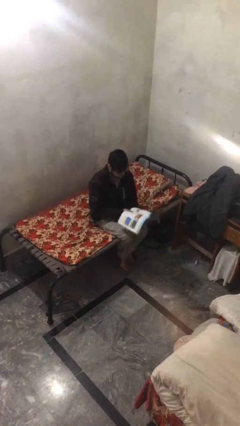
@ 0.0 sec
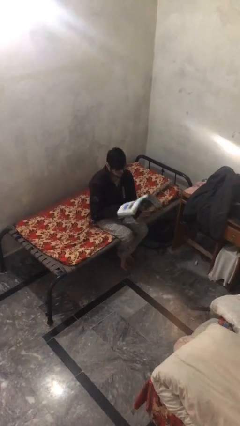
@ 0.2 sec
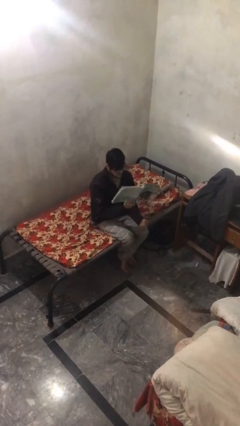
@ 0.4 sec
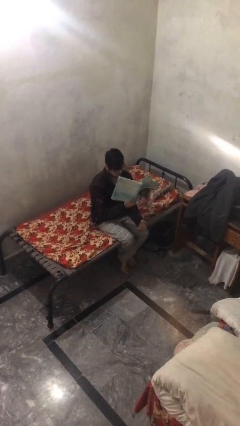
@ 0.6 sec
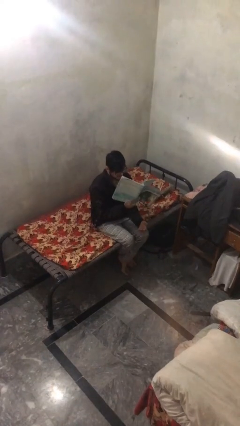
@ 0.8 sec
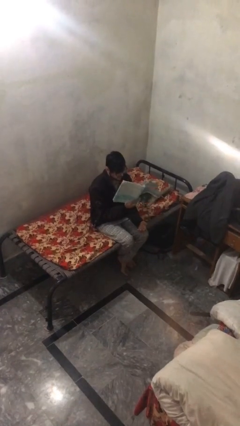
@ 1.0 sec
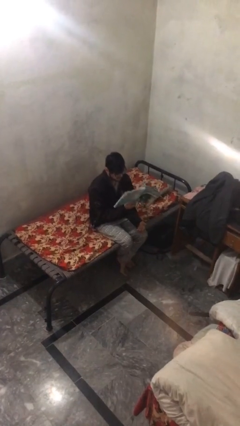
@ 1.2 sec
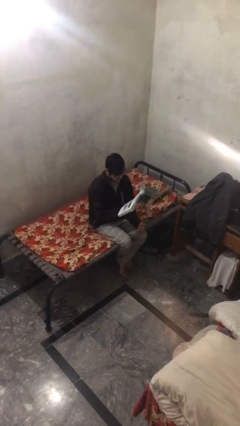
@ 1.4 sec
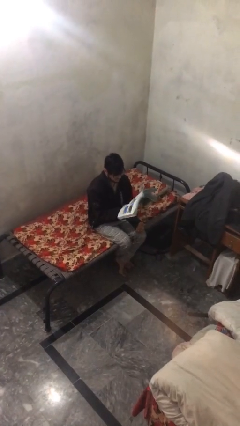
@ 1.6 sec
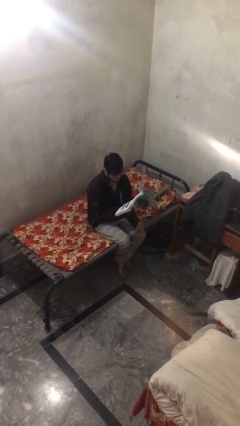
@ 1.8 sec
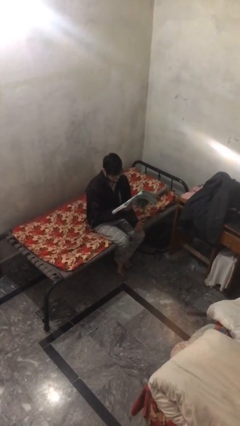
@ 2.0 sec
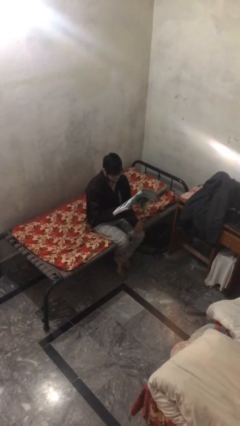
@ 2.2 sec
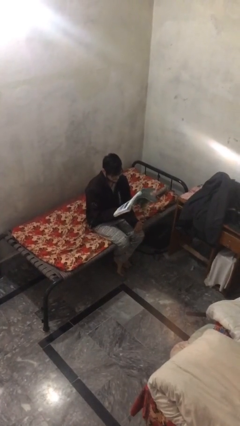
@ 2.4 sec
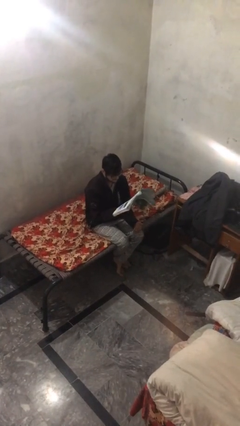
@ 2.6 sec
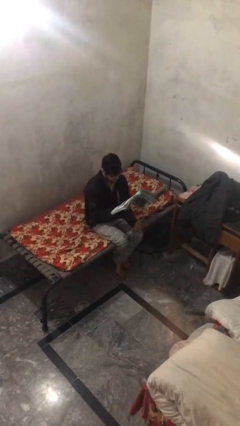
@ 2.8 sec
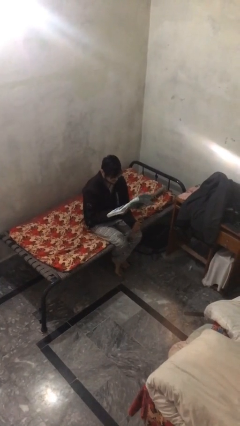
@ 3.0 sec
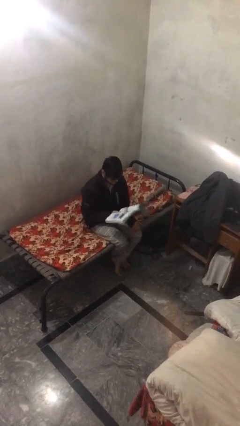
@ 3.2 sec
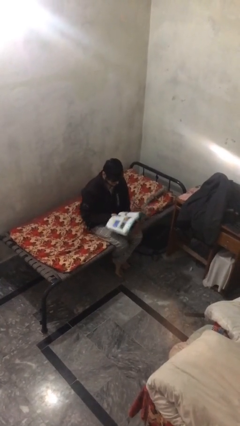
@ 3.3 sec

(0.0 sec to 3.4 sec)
person reads document

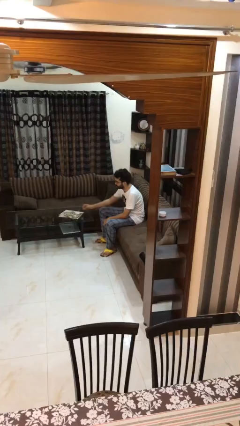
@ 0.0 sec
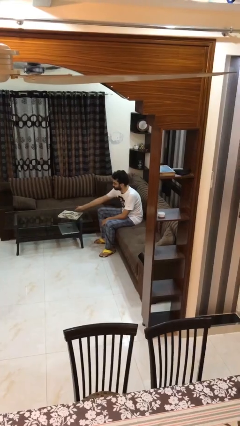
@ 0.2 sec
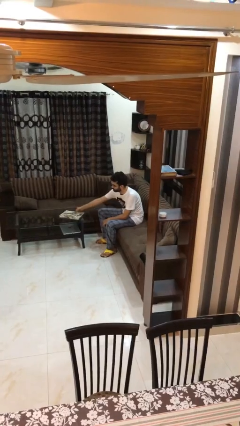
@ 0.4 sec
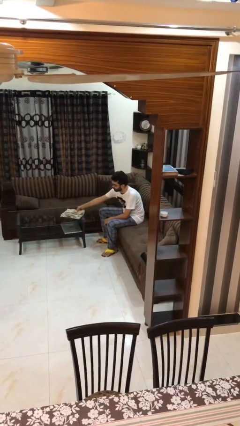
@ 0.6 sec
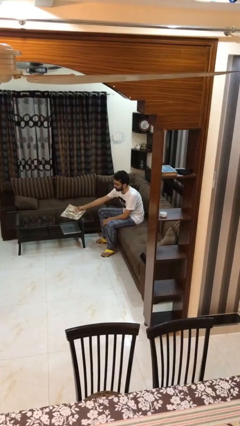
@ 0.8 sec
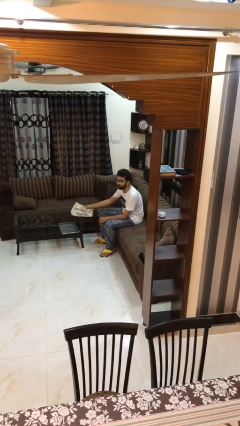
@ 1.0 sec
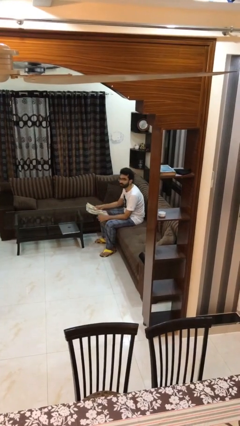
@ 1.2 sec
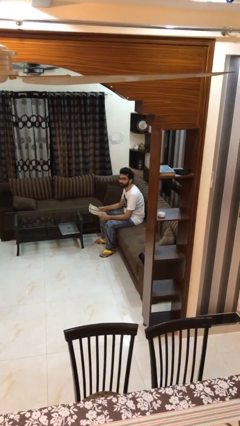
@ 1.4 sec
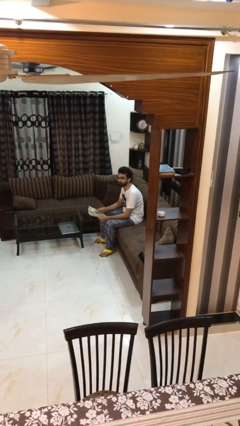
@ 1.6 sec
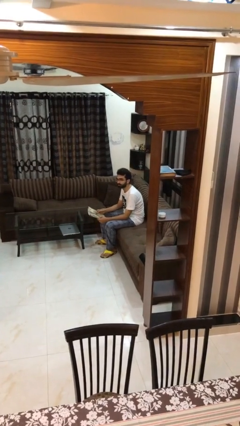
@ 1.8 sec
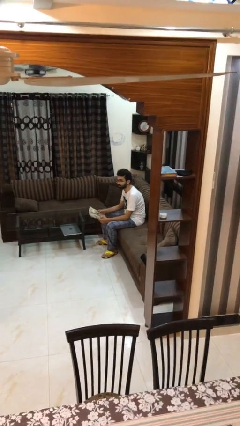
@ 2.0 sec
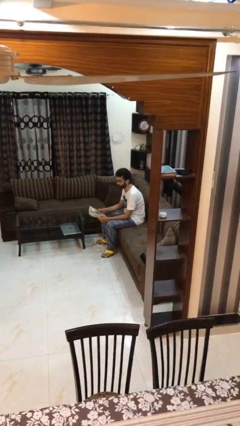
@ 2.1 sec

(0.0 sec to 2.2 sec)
person picks up object from table

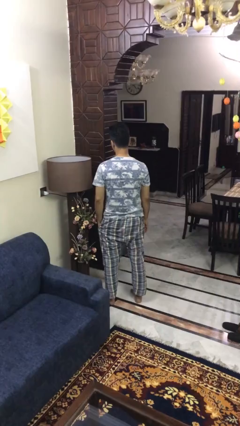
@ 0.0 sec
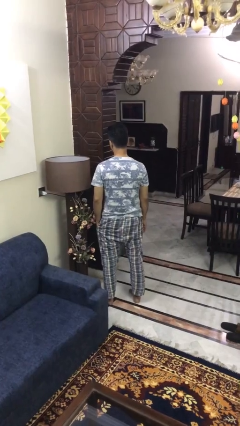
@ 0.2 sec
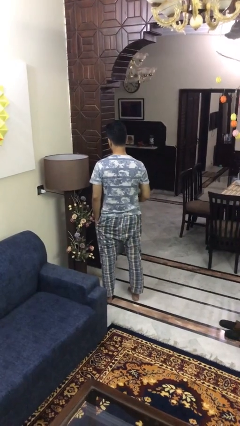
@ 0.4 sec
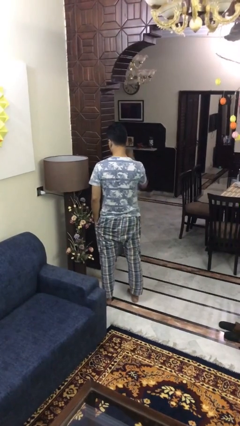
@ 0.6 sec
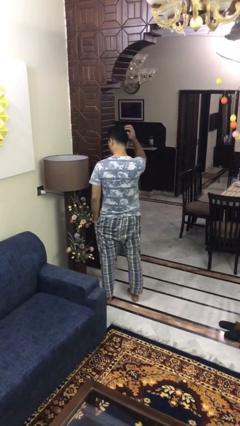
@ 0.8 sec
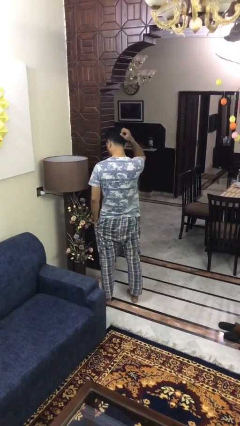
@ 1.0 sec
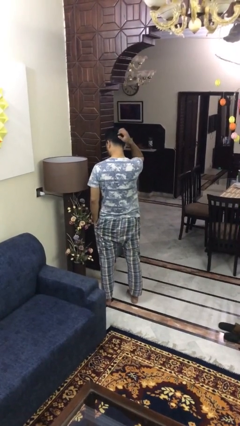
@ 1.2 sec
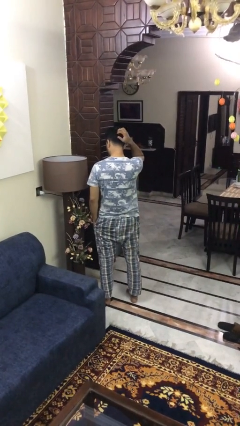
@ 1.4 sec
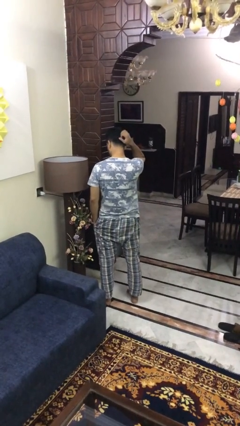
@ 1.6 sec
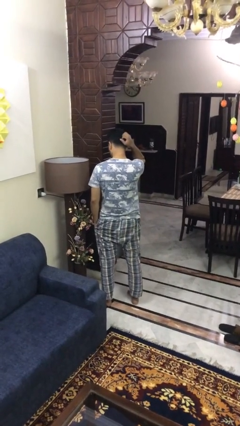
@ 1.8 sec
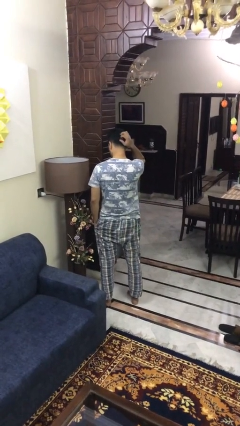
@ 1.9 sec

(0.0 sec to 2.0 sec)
person scratches face

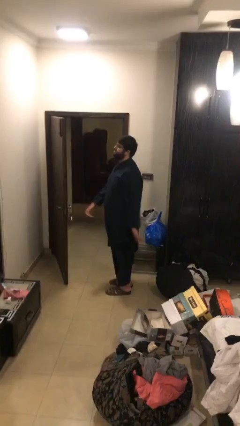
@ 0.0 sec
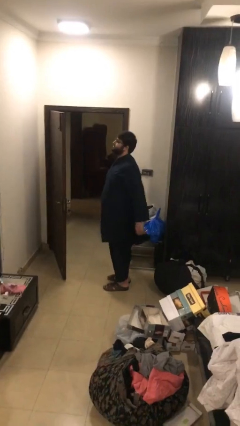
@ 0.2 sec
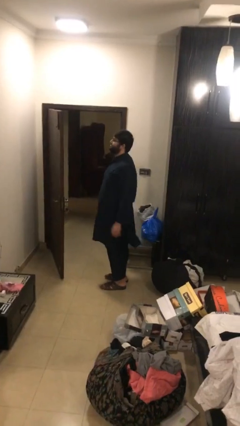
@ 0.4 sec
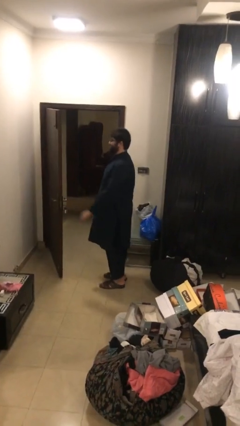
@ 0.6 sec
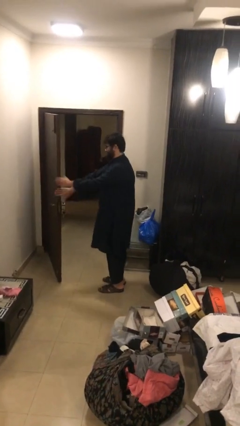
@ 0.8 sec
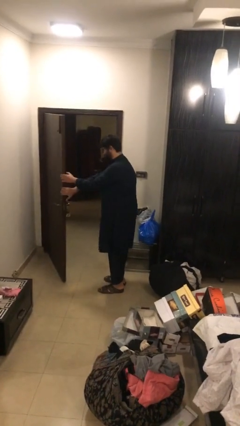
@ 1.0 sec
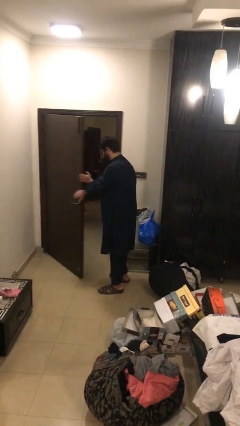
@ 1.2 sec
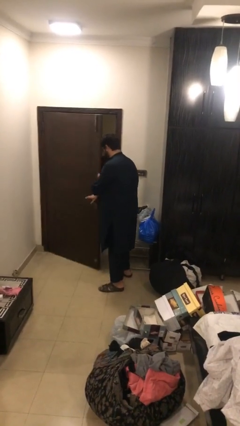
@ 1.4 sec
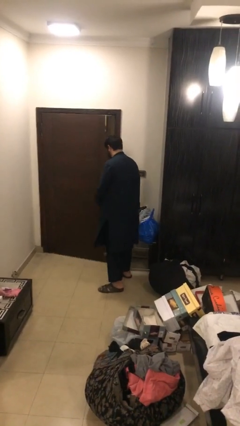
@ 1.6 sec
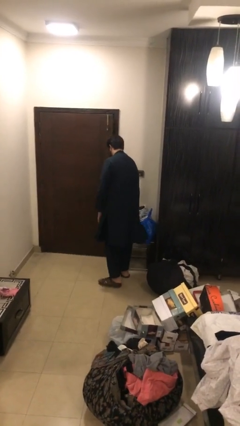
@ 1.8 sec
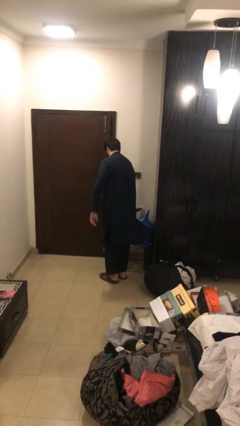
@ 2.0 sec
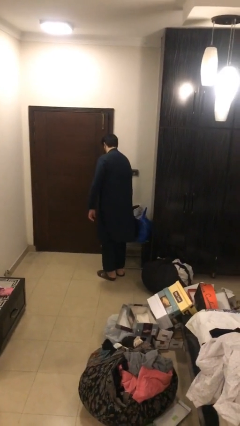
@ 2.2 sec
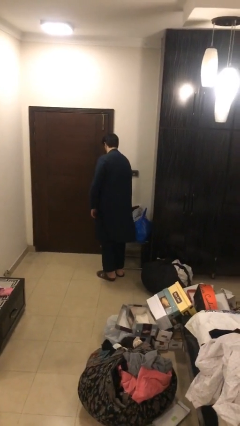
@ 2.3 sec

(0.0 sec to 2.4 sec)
person closes facility door

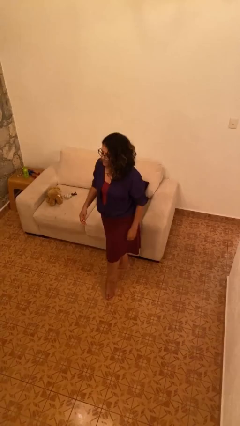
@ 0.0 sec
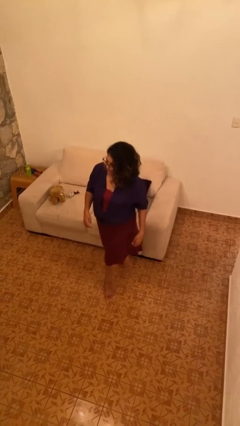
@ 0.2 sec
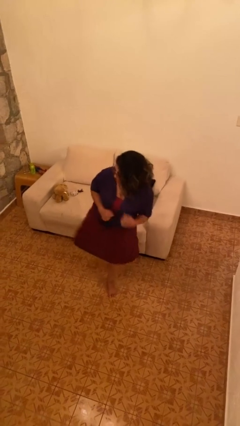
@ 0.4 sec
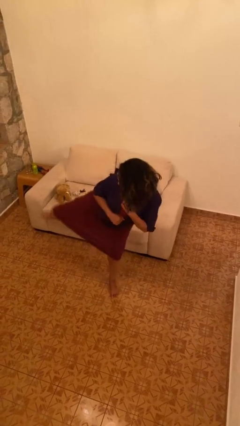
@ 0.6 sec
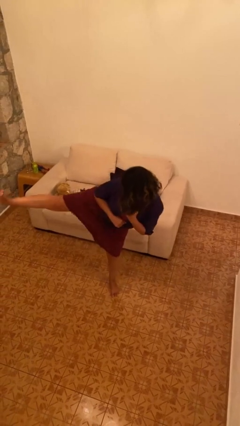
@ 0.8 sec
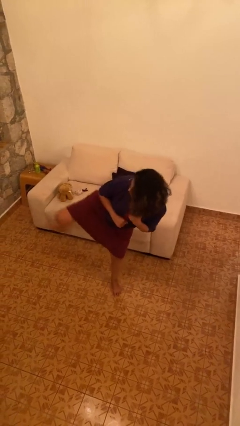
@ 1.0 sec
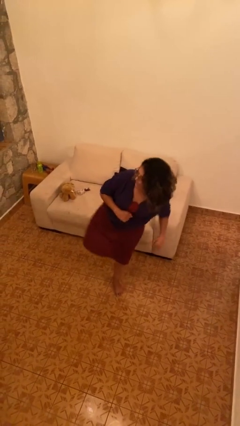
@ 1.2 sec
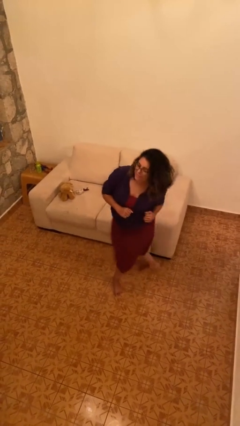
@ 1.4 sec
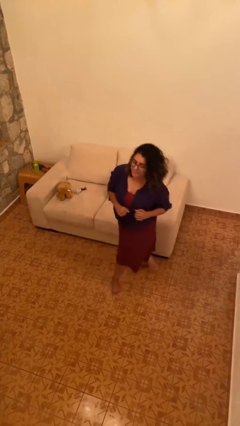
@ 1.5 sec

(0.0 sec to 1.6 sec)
person karate kicks

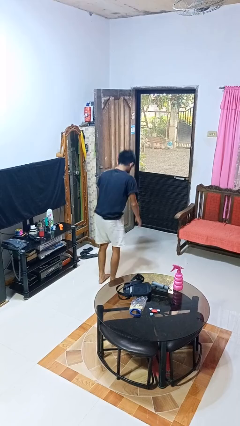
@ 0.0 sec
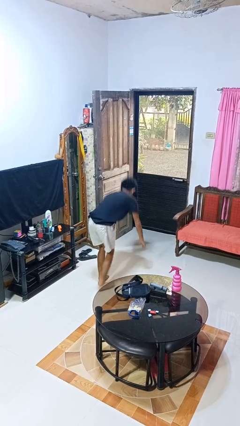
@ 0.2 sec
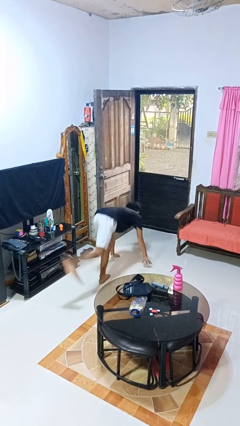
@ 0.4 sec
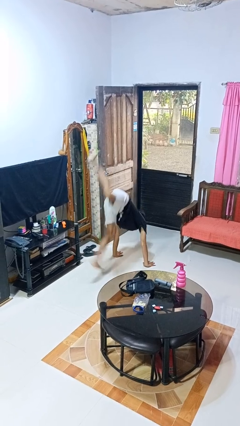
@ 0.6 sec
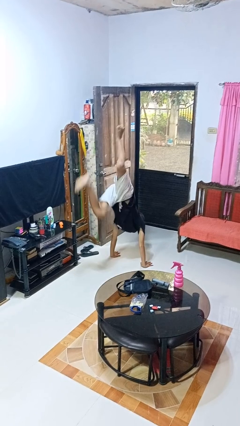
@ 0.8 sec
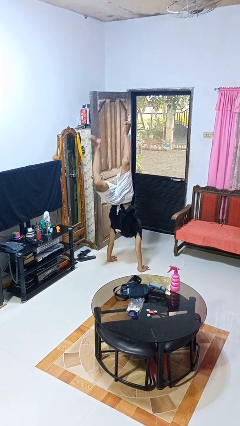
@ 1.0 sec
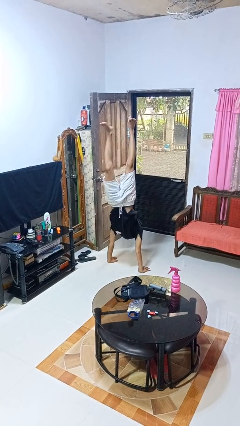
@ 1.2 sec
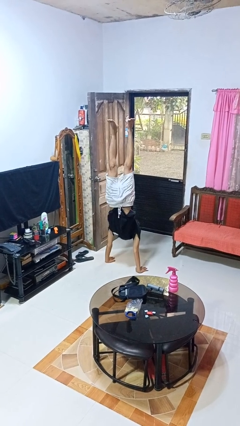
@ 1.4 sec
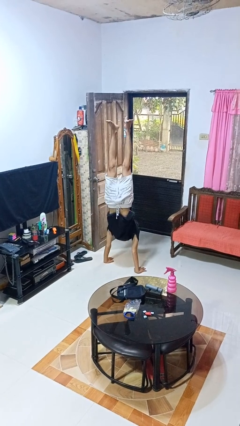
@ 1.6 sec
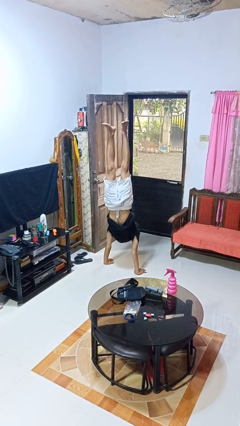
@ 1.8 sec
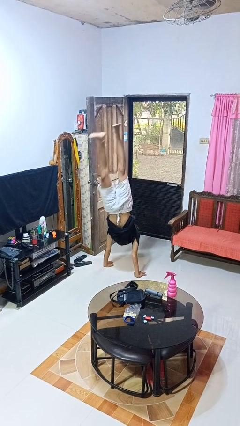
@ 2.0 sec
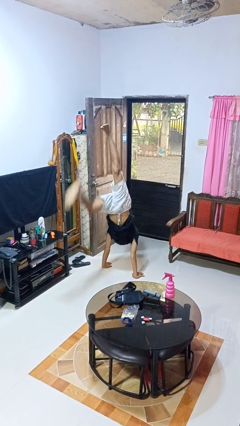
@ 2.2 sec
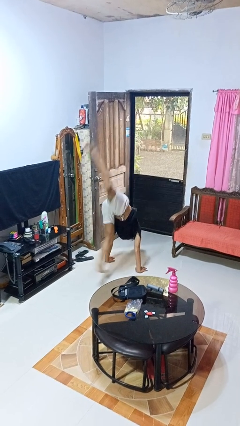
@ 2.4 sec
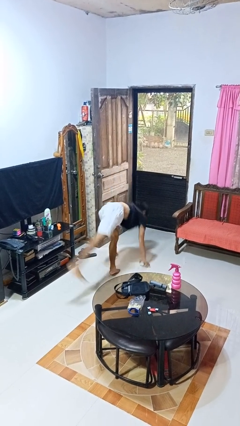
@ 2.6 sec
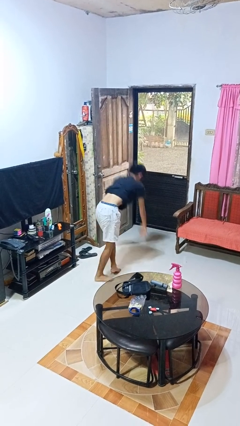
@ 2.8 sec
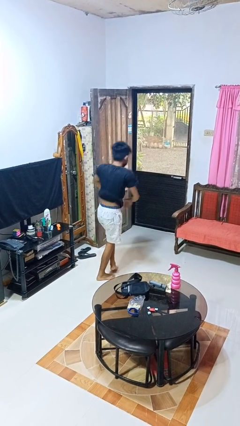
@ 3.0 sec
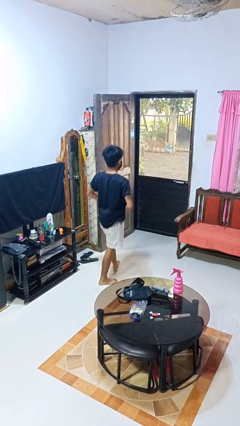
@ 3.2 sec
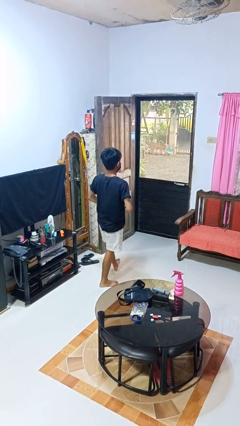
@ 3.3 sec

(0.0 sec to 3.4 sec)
person handstand

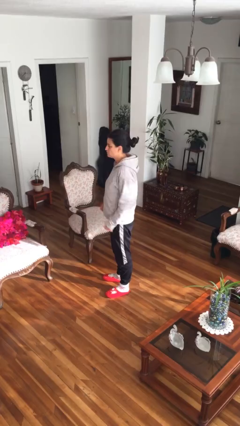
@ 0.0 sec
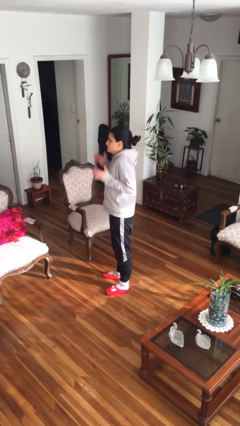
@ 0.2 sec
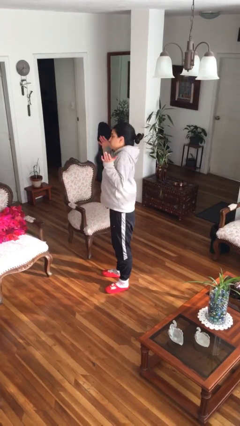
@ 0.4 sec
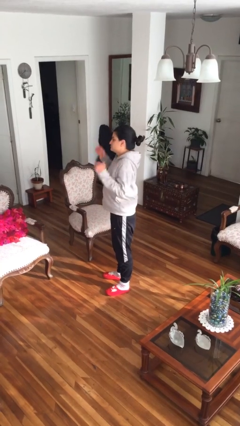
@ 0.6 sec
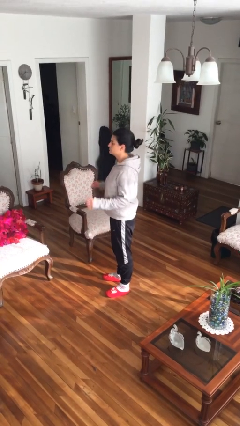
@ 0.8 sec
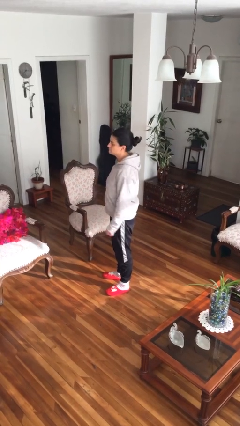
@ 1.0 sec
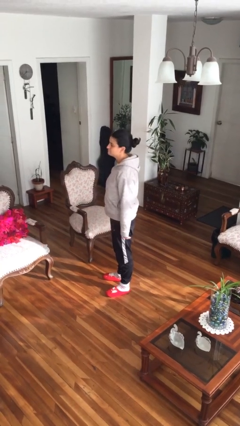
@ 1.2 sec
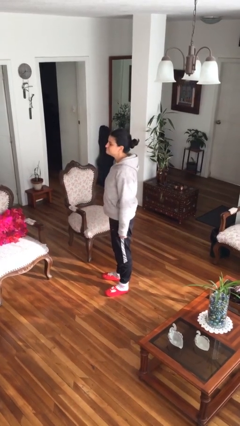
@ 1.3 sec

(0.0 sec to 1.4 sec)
person shrugs

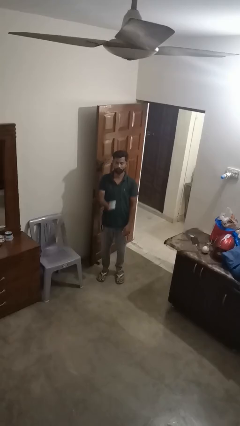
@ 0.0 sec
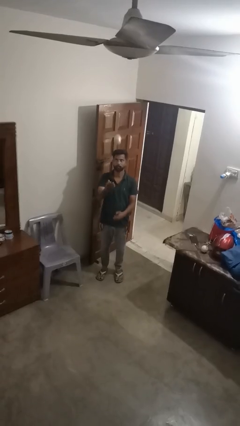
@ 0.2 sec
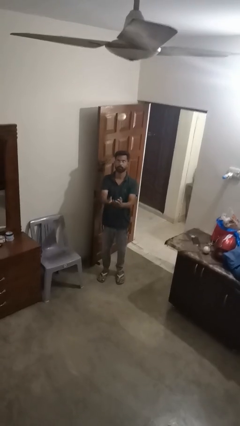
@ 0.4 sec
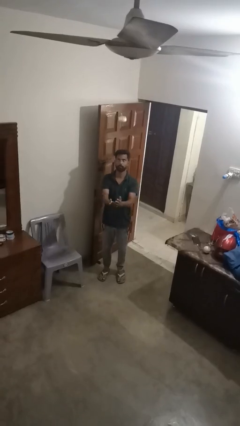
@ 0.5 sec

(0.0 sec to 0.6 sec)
person drops object
